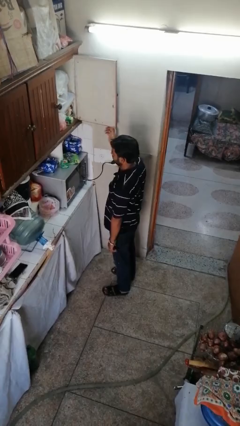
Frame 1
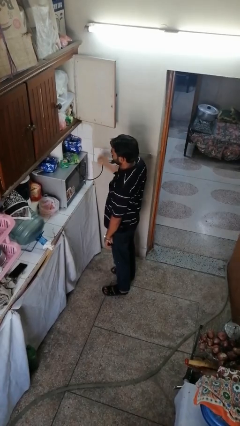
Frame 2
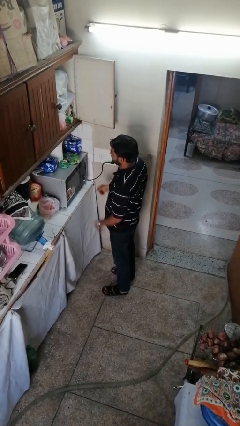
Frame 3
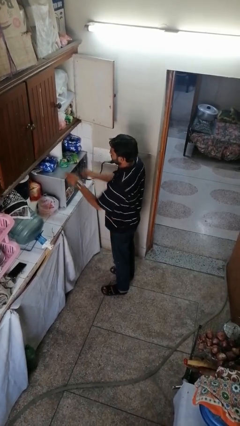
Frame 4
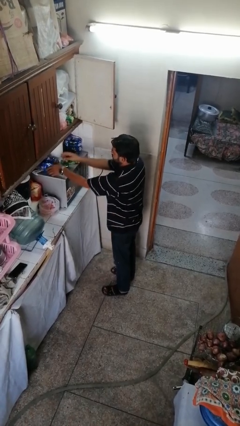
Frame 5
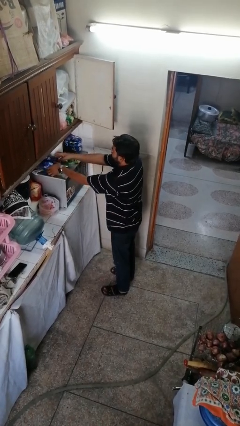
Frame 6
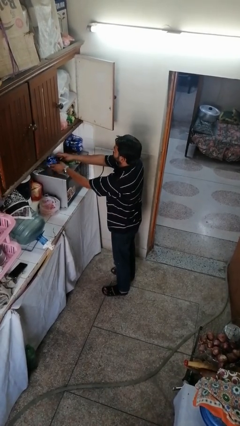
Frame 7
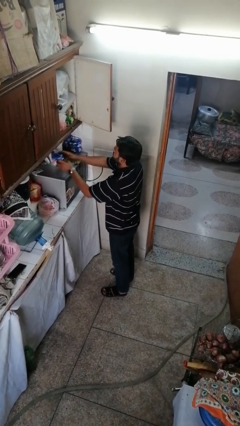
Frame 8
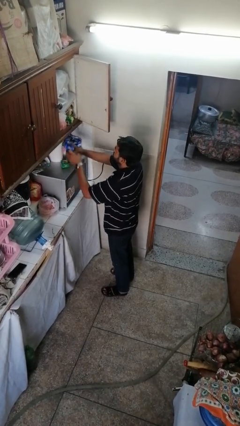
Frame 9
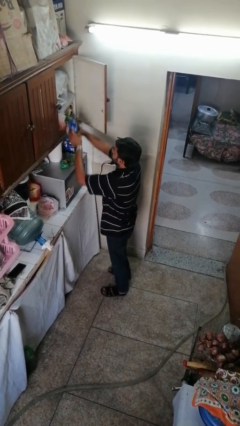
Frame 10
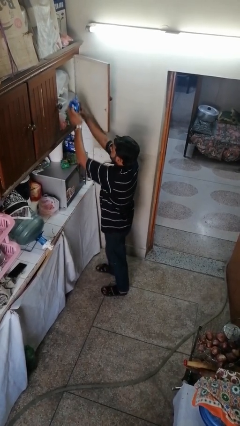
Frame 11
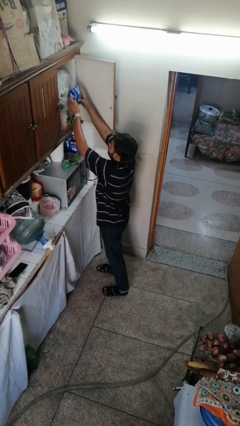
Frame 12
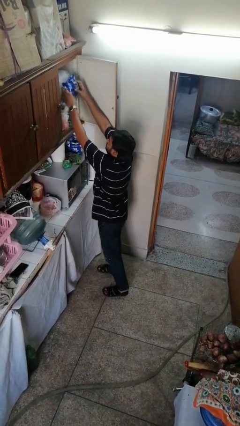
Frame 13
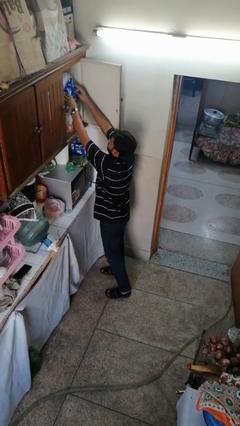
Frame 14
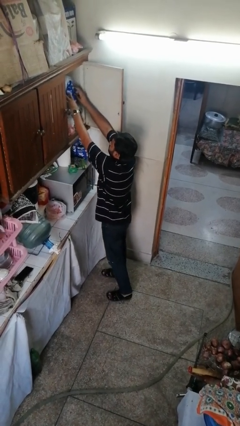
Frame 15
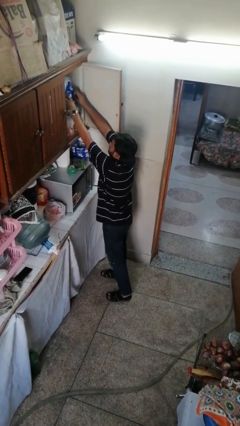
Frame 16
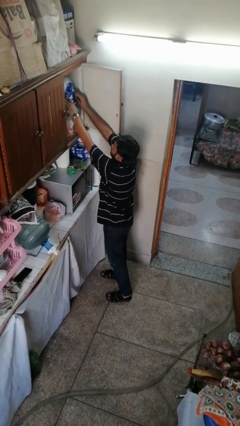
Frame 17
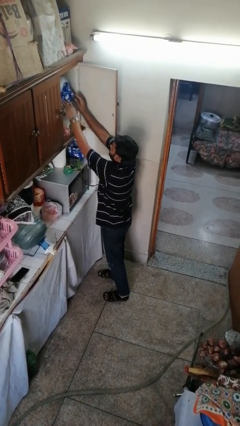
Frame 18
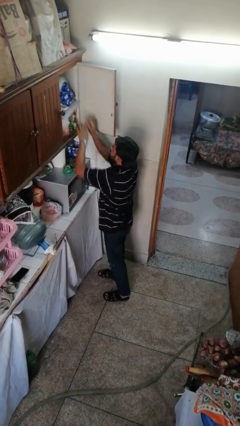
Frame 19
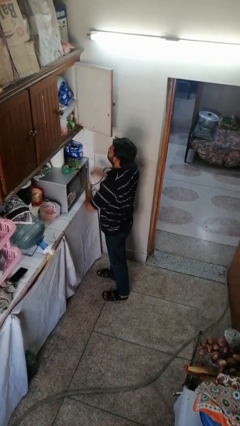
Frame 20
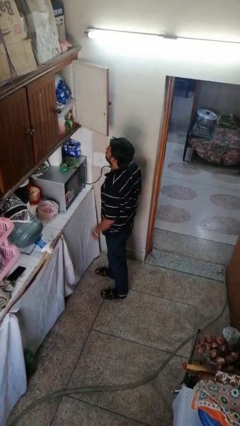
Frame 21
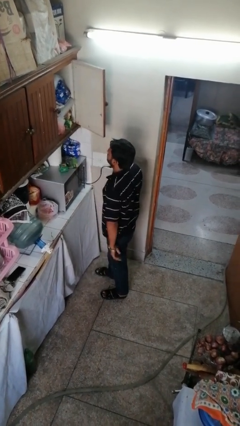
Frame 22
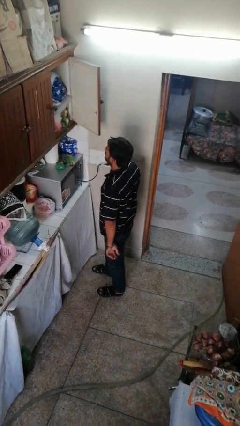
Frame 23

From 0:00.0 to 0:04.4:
person loads groceries into cabinet

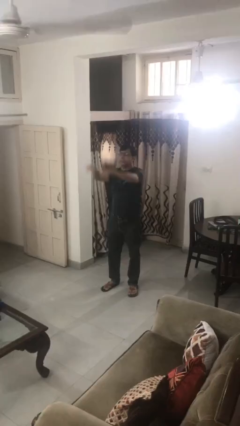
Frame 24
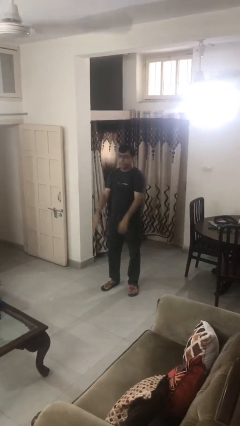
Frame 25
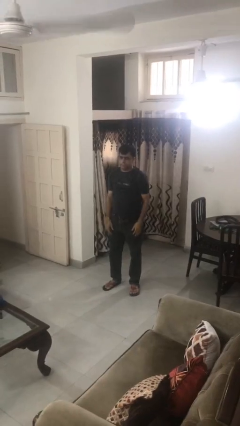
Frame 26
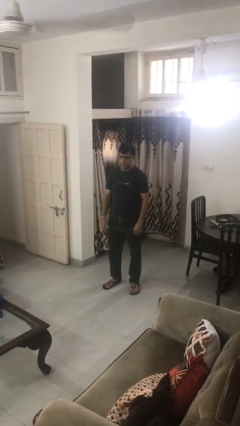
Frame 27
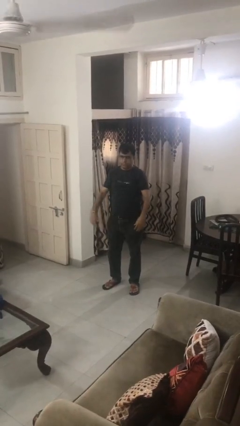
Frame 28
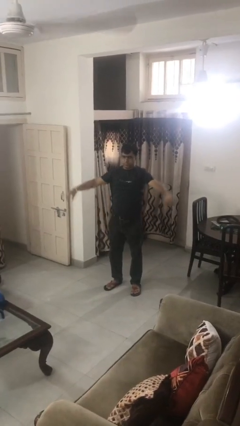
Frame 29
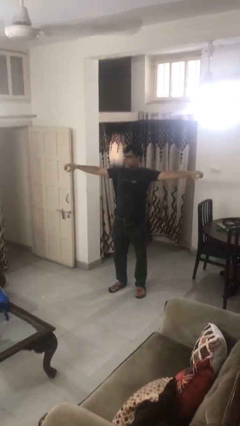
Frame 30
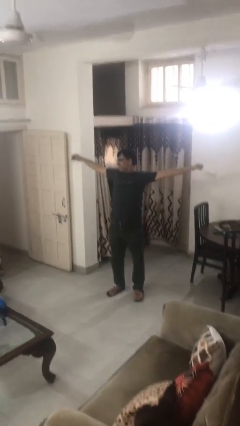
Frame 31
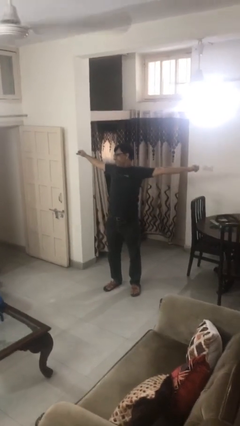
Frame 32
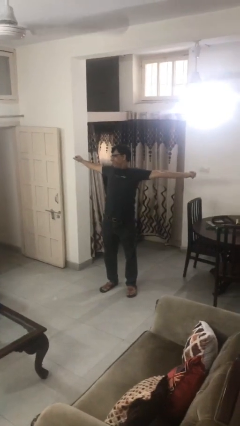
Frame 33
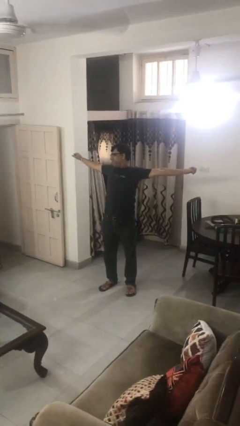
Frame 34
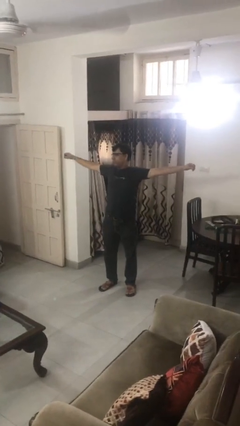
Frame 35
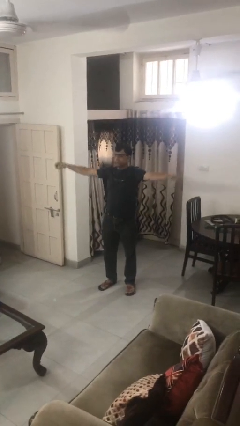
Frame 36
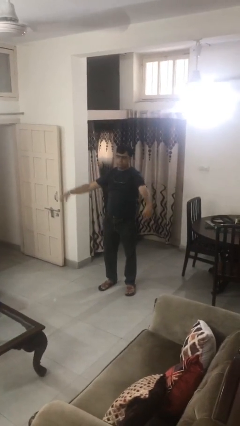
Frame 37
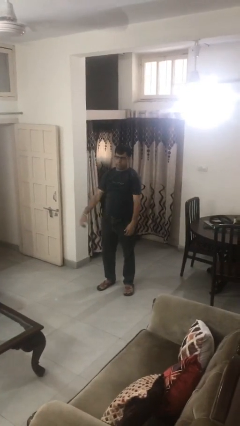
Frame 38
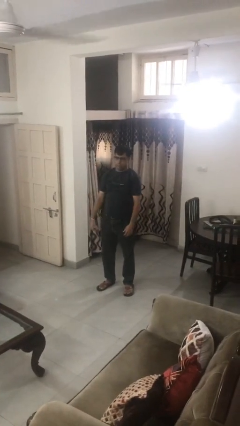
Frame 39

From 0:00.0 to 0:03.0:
person stretches arms to side

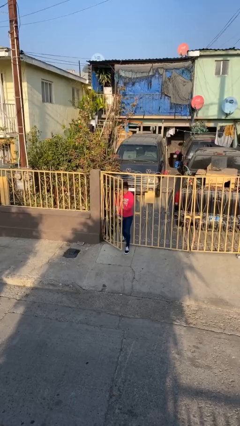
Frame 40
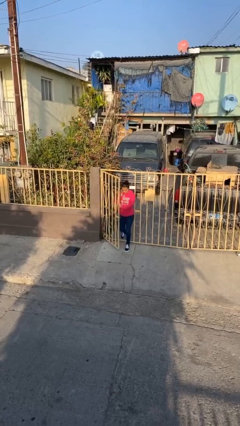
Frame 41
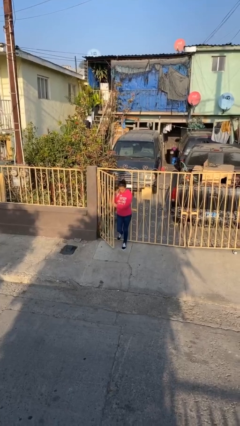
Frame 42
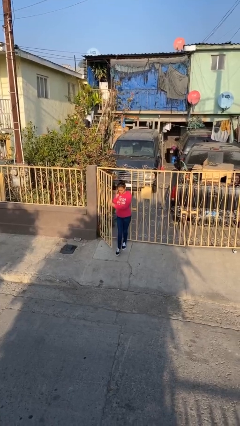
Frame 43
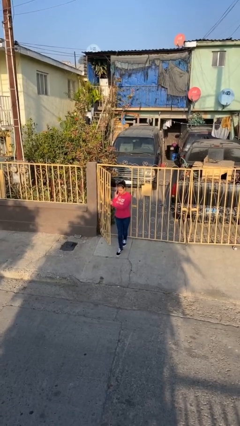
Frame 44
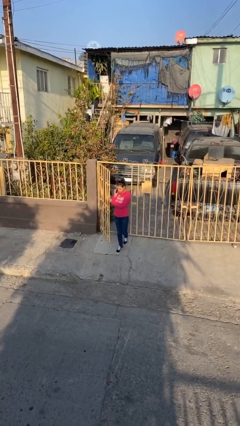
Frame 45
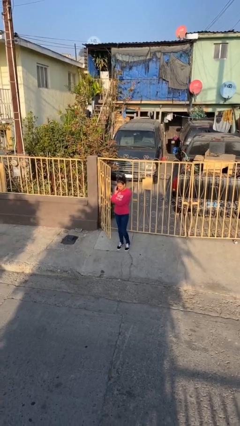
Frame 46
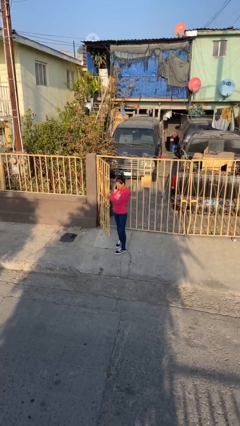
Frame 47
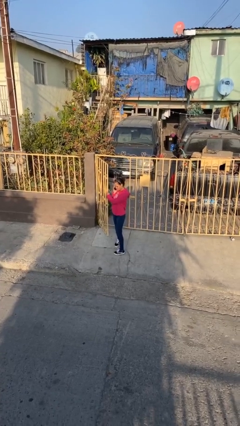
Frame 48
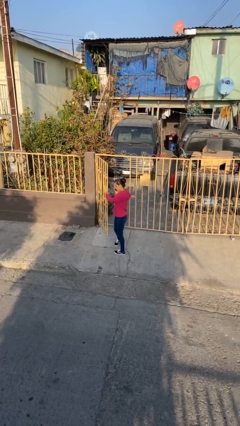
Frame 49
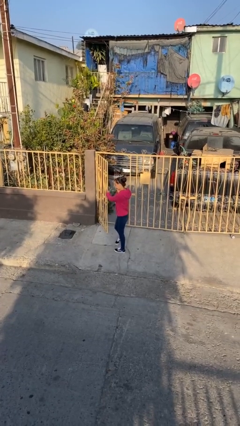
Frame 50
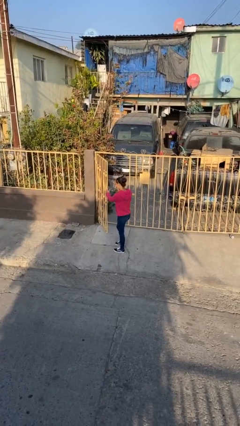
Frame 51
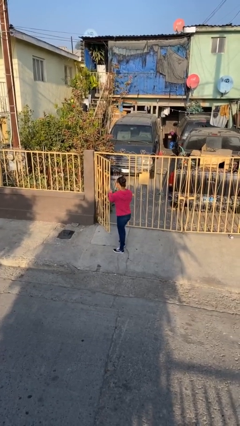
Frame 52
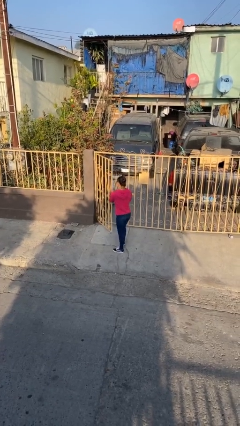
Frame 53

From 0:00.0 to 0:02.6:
person enters scene through structure

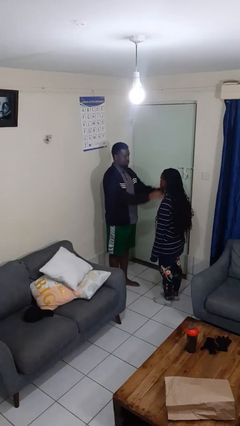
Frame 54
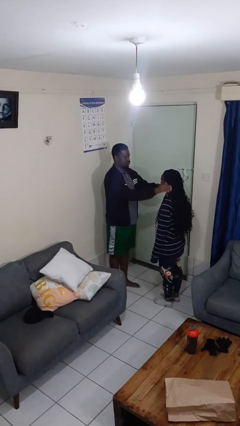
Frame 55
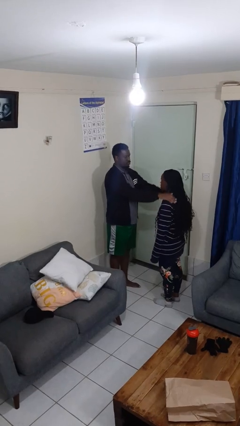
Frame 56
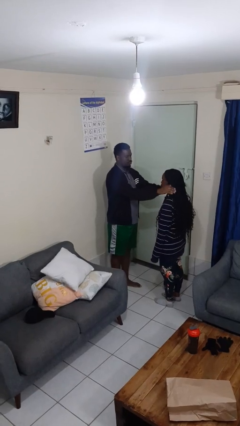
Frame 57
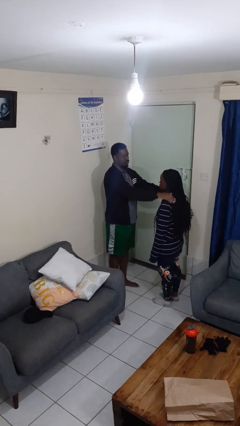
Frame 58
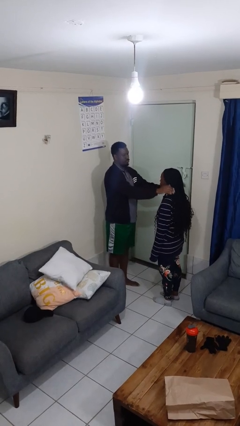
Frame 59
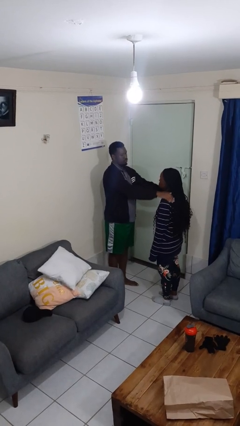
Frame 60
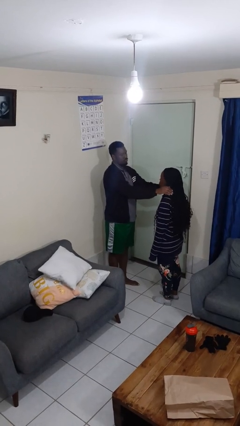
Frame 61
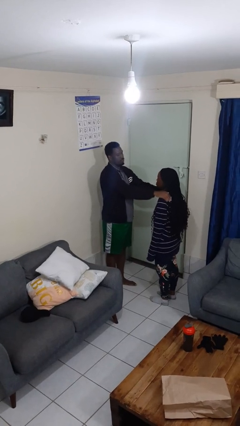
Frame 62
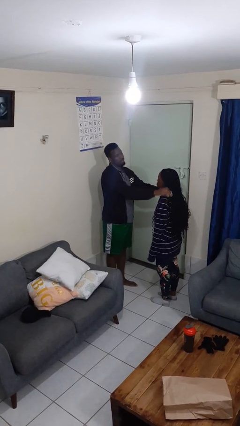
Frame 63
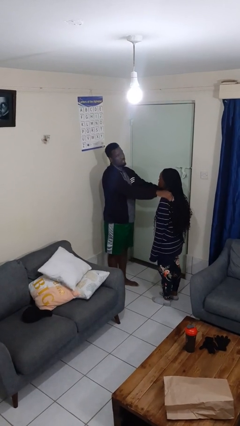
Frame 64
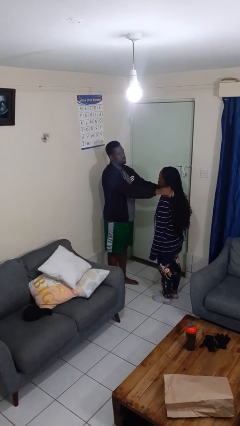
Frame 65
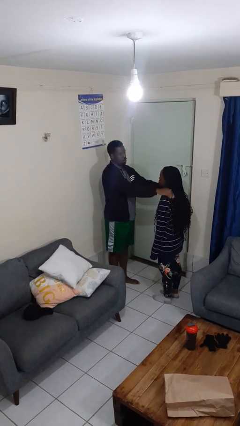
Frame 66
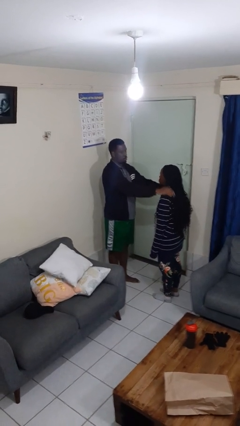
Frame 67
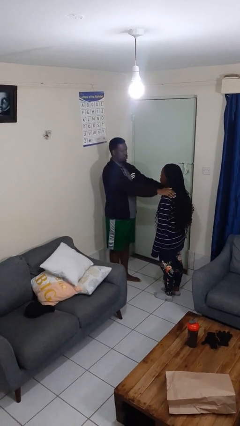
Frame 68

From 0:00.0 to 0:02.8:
person pounds shoulders of person

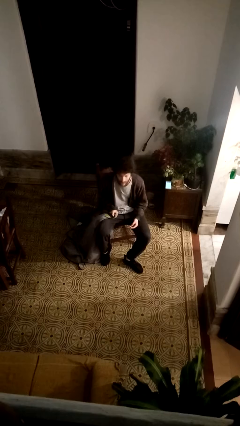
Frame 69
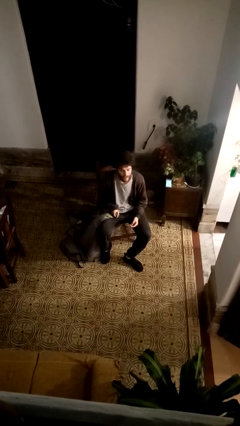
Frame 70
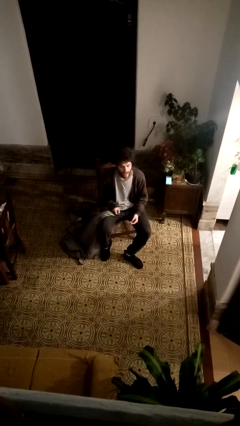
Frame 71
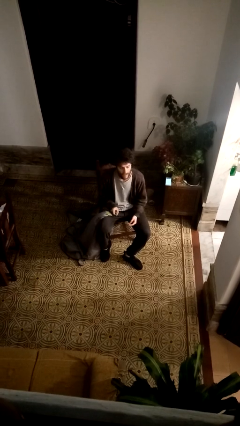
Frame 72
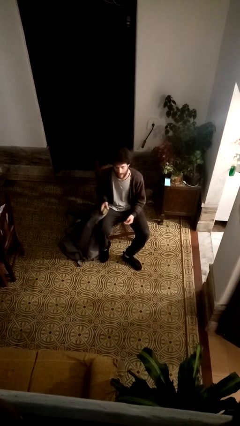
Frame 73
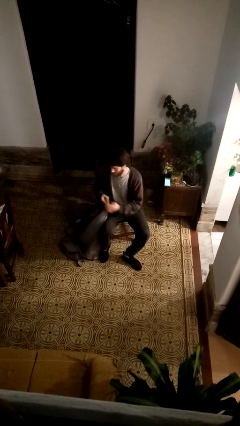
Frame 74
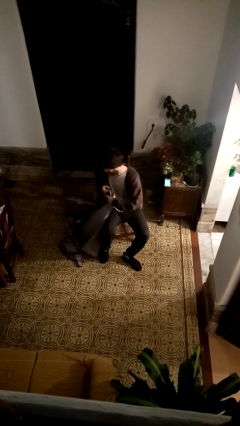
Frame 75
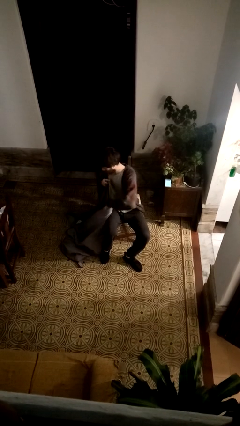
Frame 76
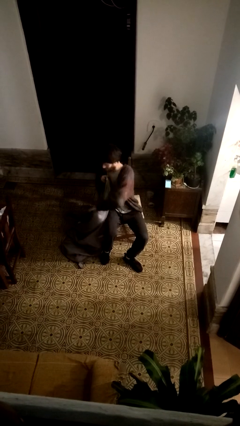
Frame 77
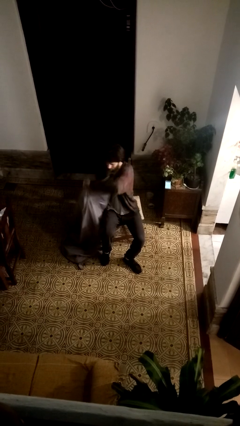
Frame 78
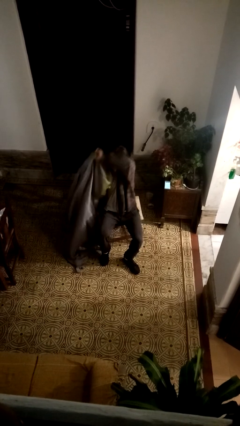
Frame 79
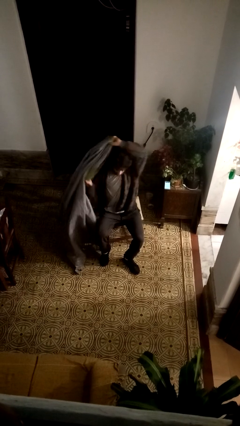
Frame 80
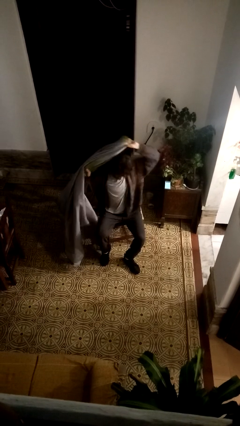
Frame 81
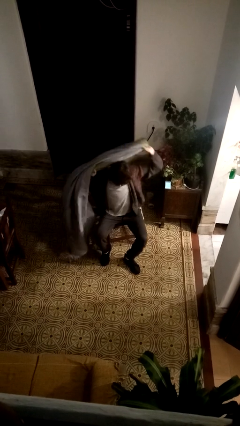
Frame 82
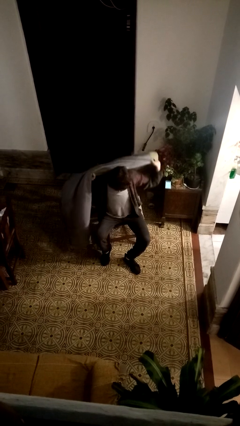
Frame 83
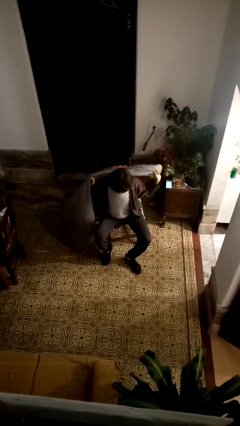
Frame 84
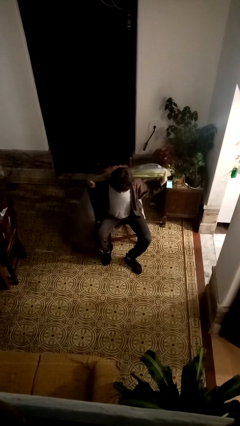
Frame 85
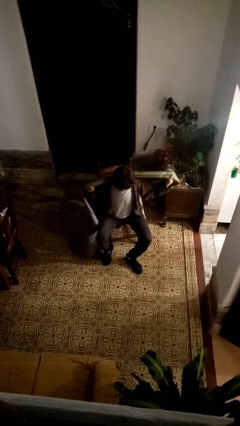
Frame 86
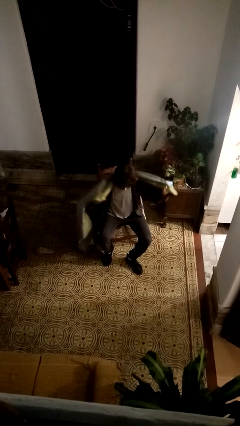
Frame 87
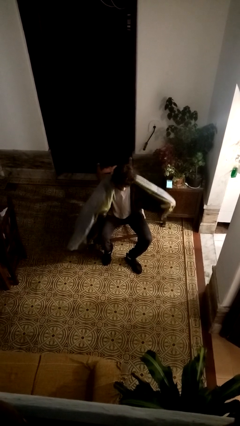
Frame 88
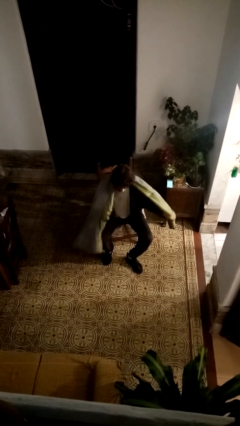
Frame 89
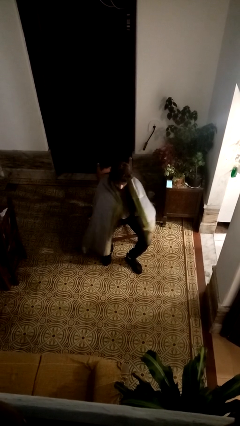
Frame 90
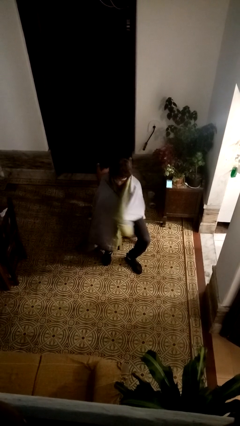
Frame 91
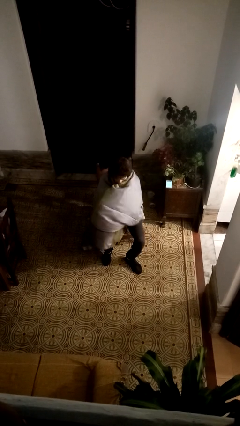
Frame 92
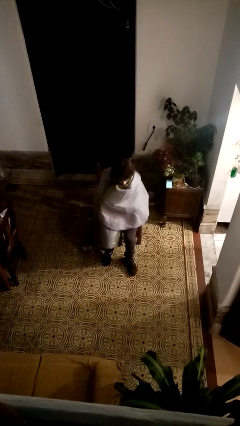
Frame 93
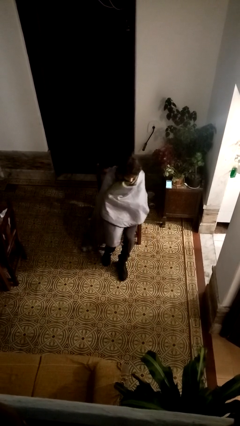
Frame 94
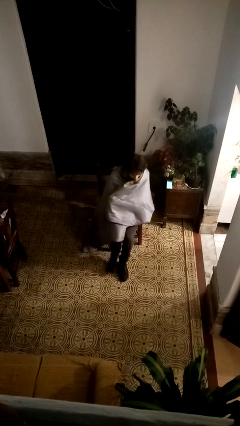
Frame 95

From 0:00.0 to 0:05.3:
person covers with blanket
